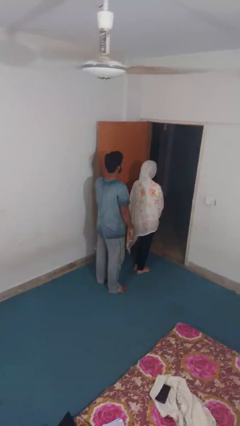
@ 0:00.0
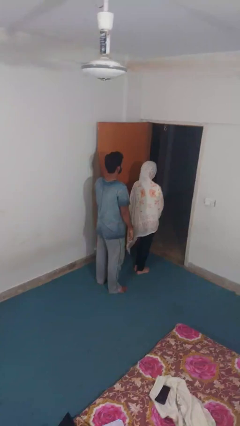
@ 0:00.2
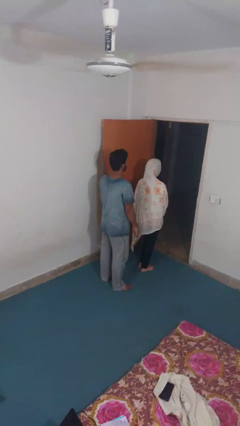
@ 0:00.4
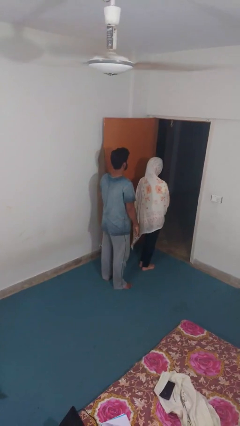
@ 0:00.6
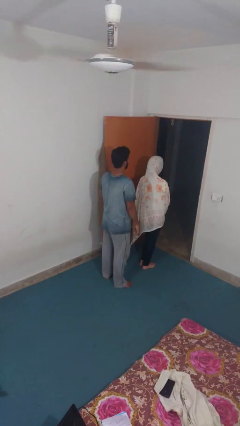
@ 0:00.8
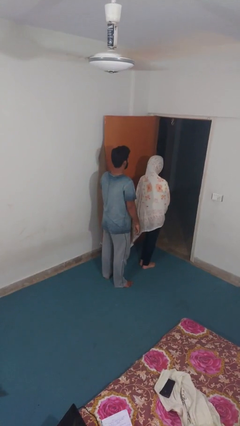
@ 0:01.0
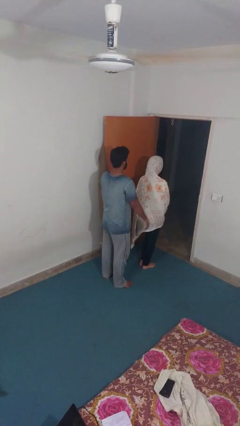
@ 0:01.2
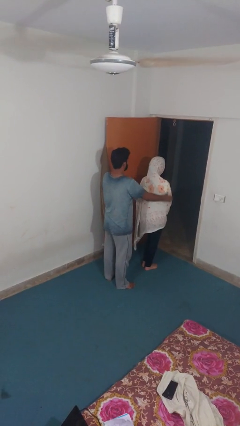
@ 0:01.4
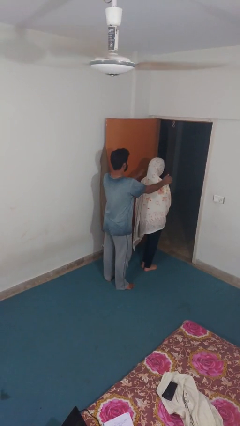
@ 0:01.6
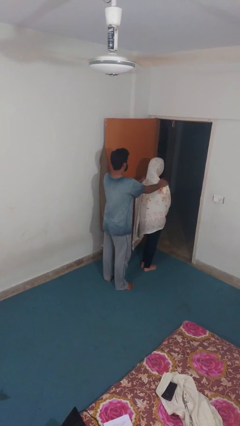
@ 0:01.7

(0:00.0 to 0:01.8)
person grabs person by shoulder

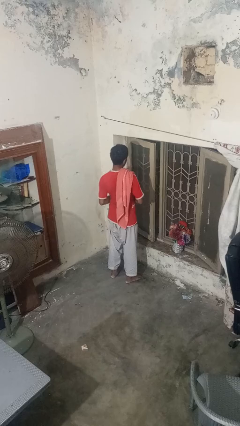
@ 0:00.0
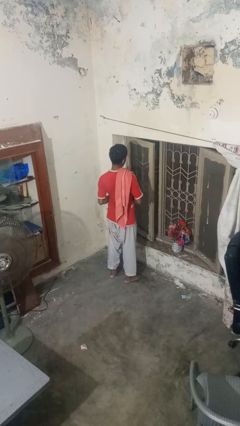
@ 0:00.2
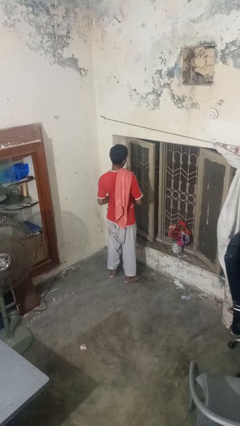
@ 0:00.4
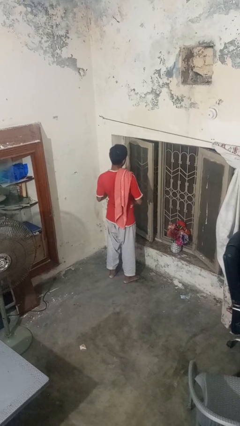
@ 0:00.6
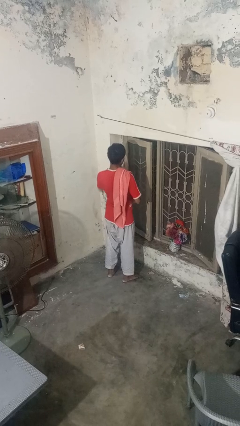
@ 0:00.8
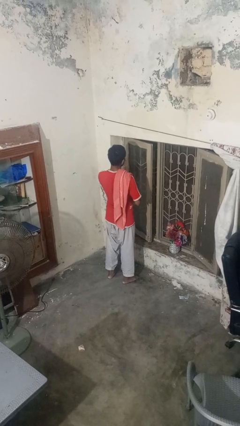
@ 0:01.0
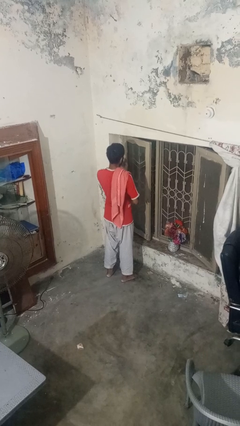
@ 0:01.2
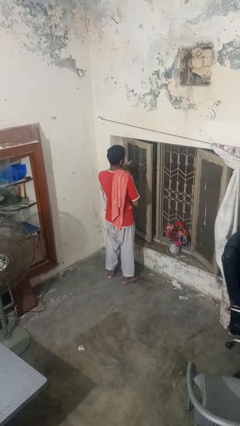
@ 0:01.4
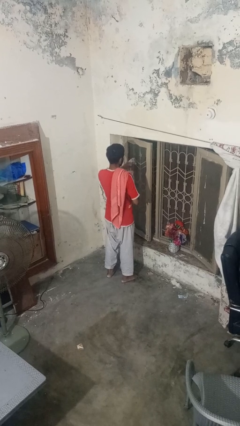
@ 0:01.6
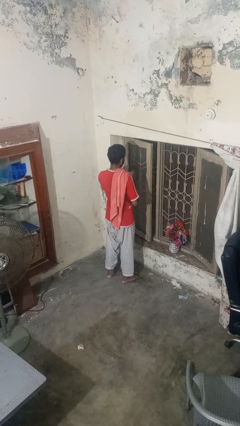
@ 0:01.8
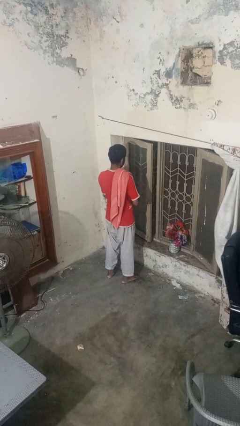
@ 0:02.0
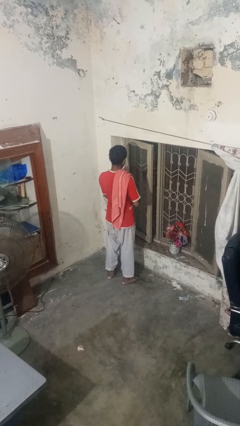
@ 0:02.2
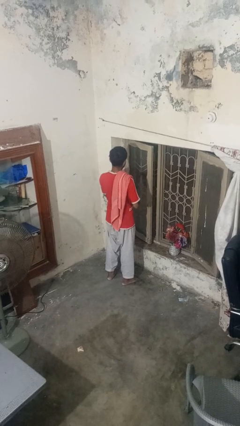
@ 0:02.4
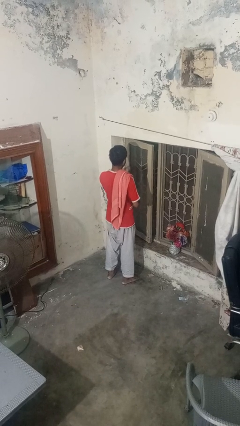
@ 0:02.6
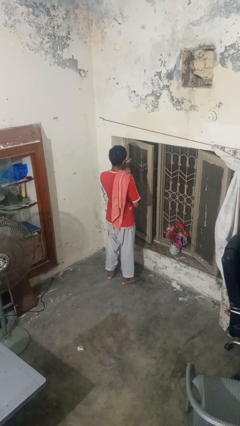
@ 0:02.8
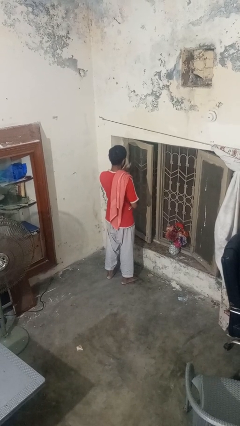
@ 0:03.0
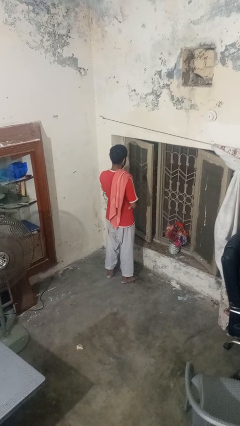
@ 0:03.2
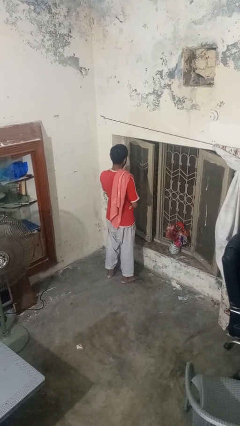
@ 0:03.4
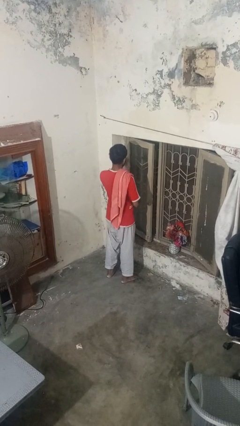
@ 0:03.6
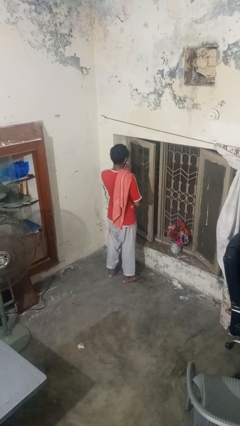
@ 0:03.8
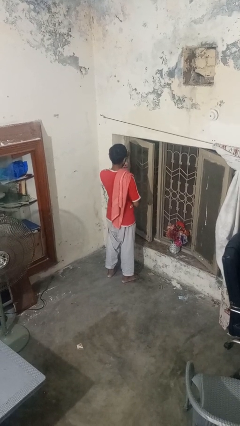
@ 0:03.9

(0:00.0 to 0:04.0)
person sprays from bottle

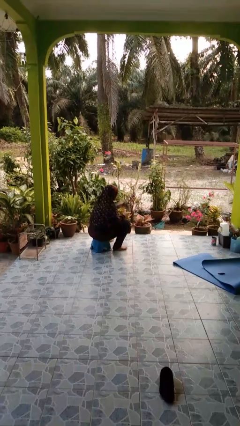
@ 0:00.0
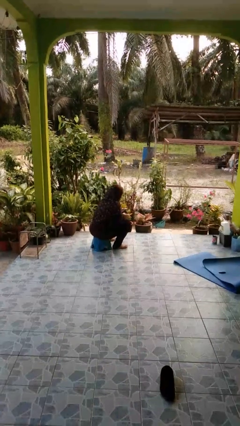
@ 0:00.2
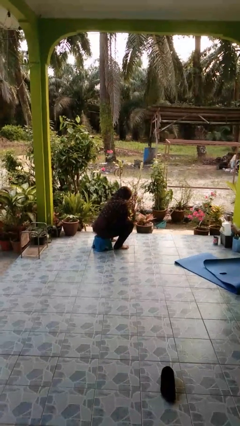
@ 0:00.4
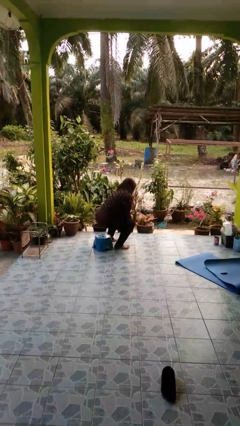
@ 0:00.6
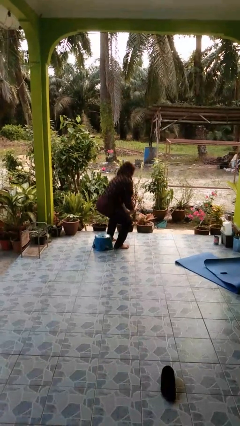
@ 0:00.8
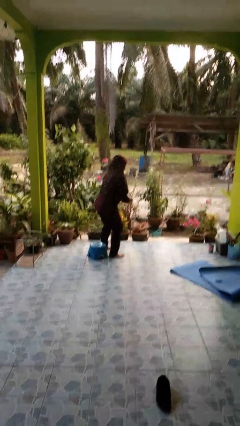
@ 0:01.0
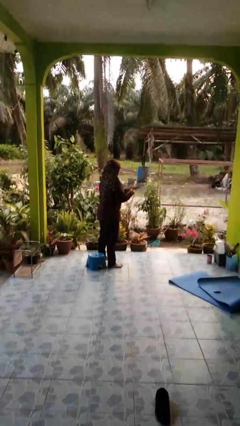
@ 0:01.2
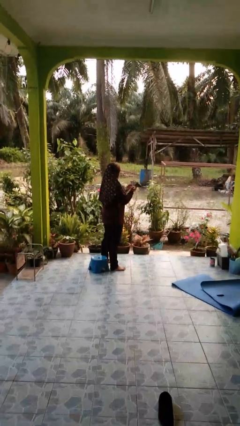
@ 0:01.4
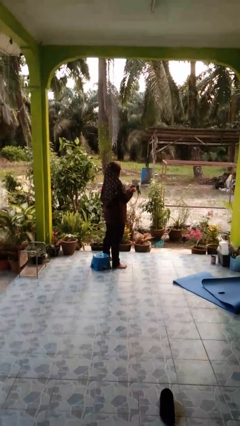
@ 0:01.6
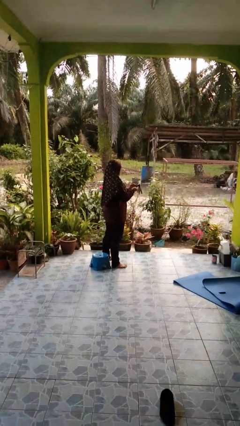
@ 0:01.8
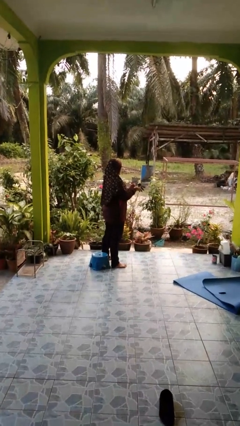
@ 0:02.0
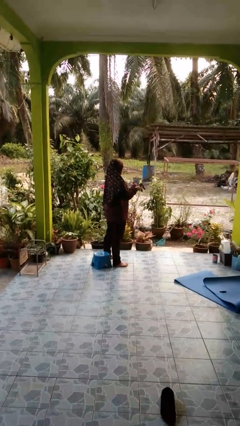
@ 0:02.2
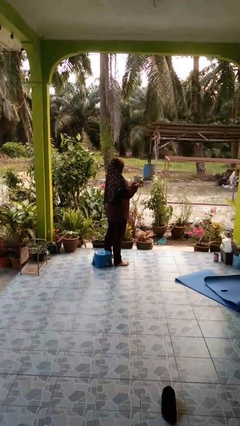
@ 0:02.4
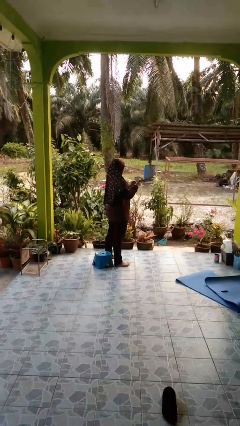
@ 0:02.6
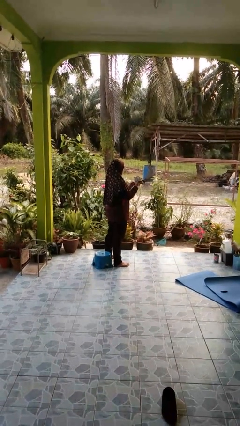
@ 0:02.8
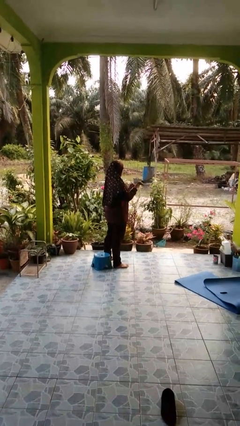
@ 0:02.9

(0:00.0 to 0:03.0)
person takes off gloves

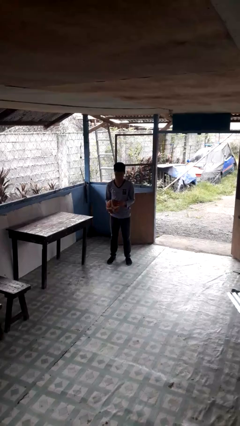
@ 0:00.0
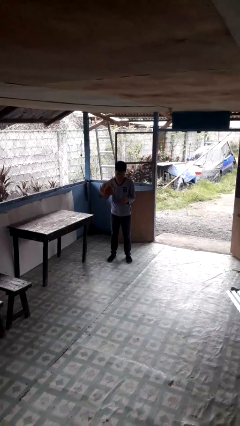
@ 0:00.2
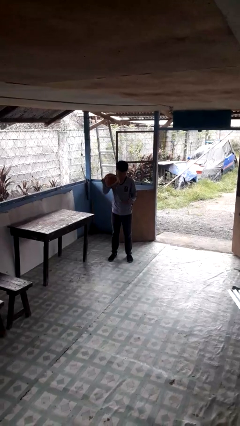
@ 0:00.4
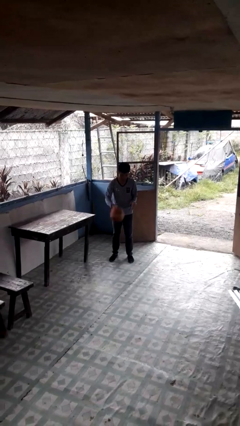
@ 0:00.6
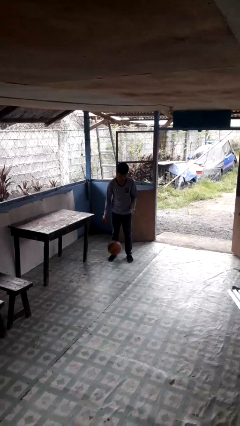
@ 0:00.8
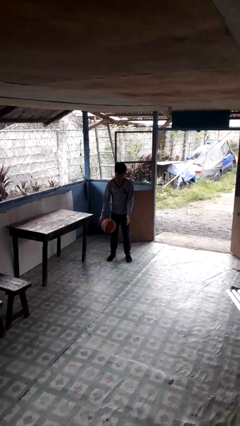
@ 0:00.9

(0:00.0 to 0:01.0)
person bounces ball on floor

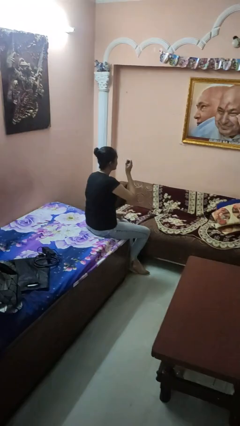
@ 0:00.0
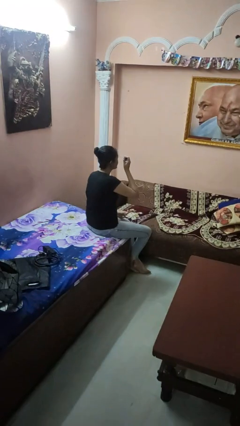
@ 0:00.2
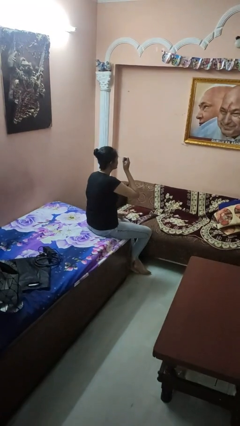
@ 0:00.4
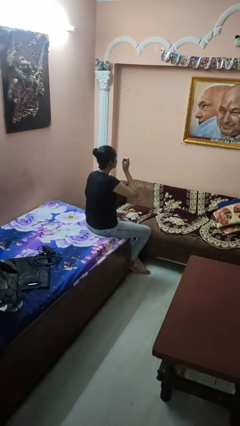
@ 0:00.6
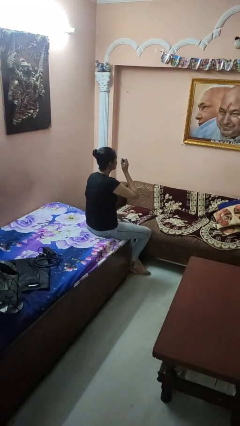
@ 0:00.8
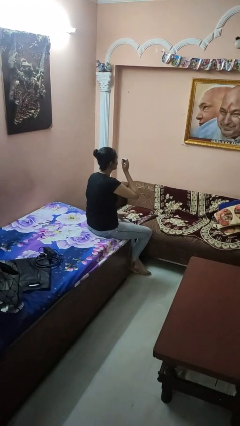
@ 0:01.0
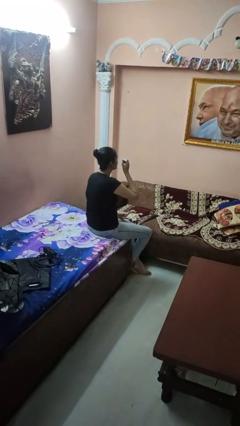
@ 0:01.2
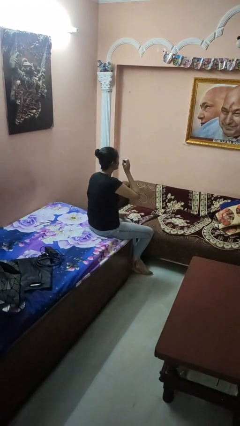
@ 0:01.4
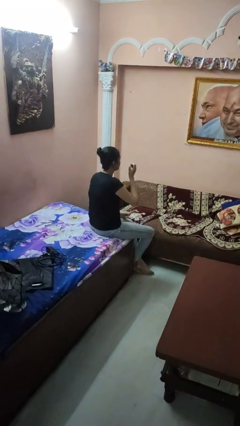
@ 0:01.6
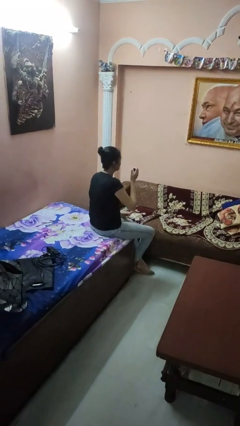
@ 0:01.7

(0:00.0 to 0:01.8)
person applies eye makeup

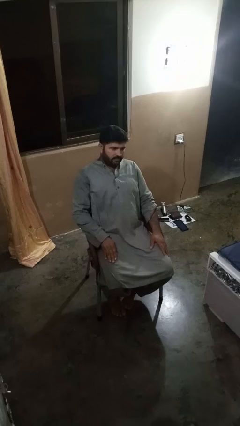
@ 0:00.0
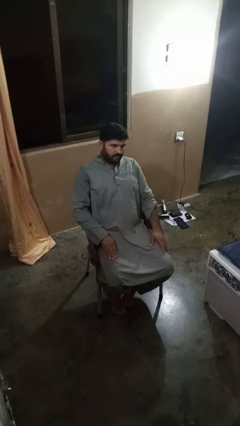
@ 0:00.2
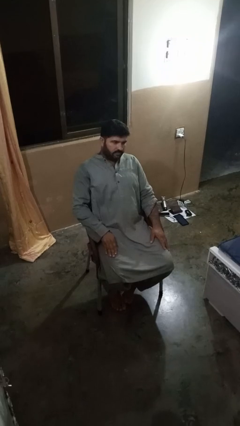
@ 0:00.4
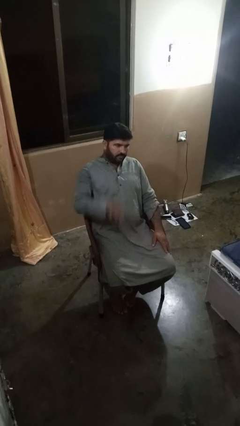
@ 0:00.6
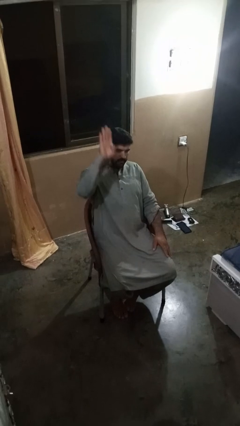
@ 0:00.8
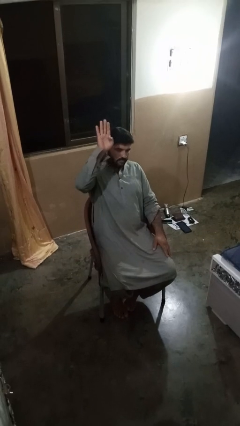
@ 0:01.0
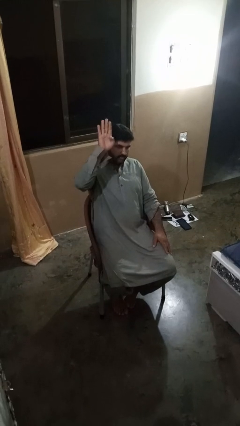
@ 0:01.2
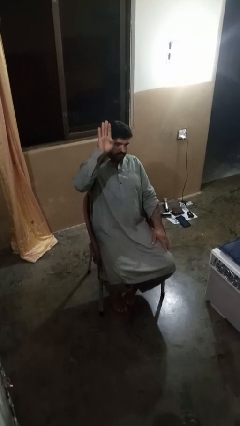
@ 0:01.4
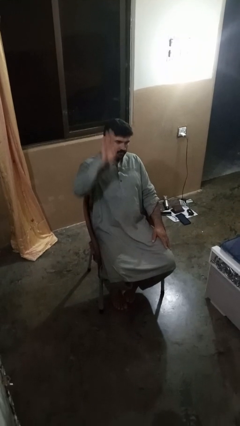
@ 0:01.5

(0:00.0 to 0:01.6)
person gestures number four

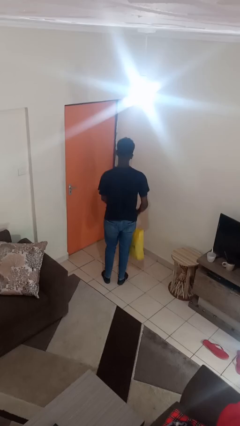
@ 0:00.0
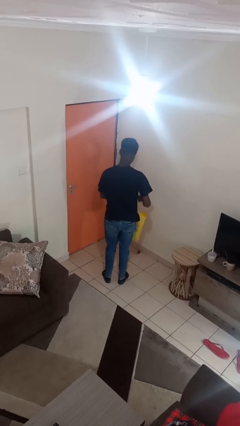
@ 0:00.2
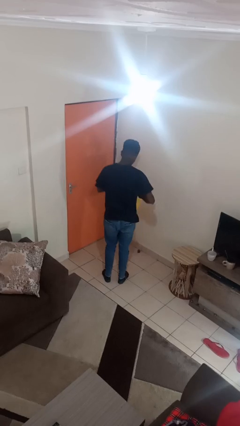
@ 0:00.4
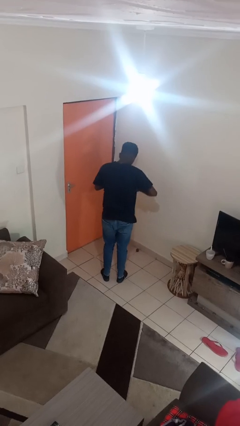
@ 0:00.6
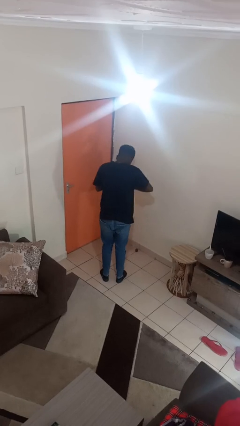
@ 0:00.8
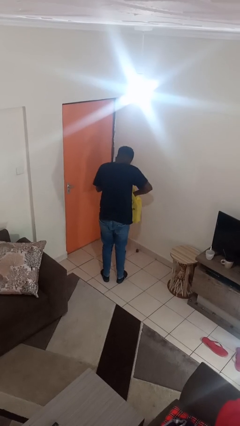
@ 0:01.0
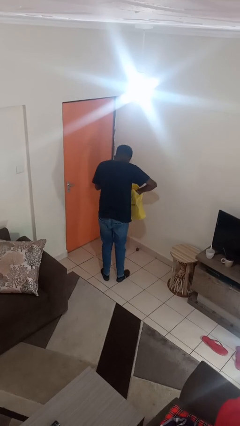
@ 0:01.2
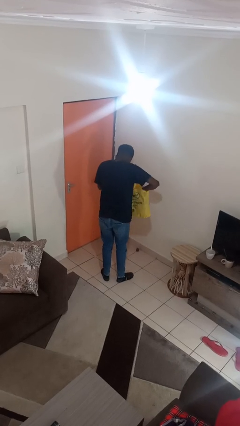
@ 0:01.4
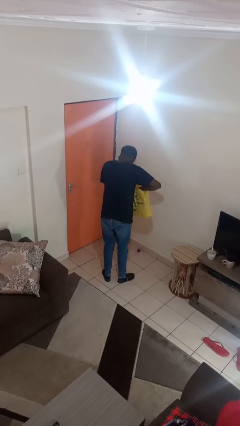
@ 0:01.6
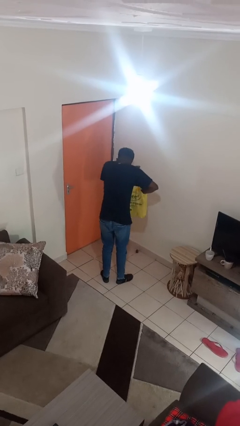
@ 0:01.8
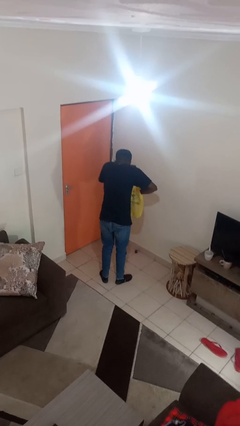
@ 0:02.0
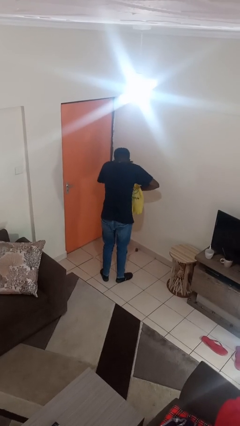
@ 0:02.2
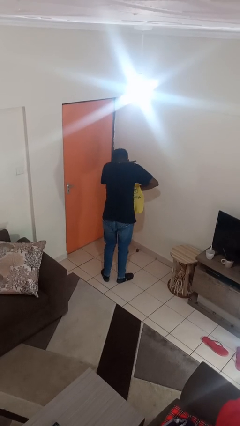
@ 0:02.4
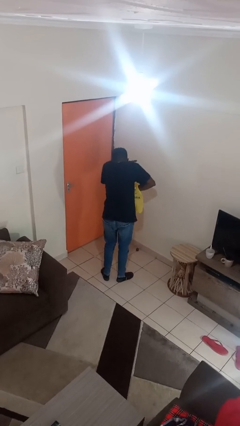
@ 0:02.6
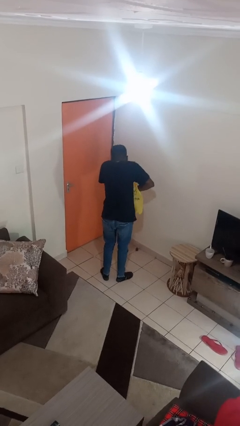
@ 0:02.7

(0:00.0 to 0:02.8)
person searches in bag

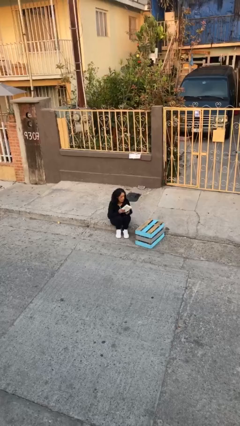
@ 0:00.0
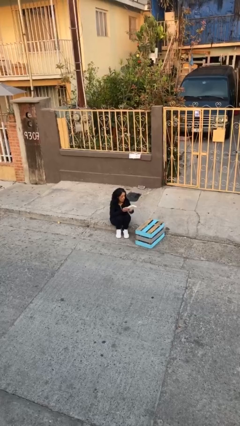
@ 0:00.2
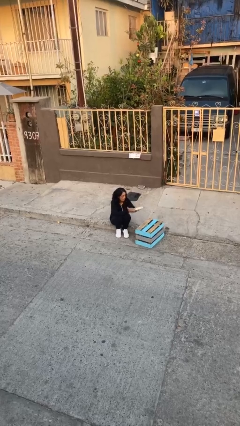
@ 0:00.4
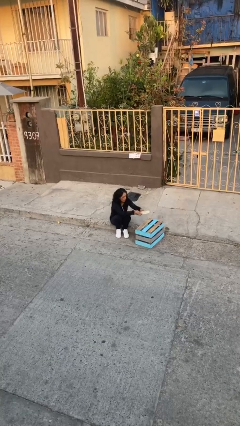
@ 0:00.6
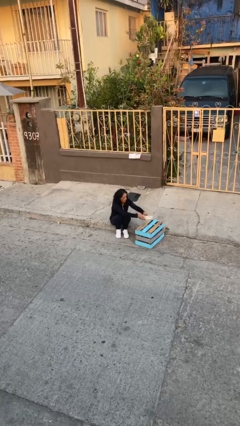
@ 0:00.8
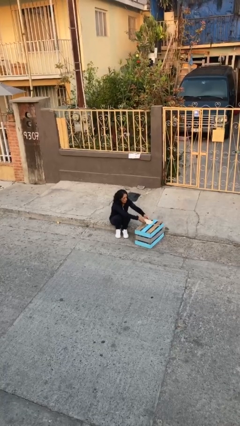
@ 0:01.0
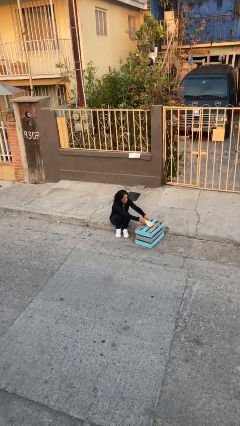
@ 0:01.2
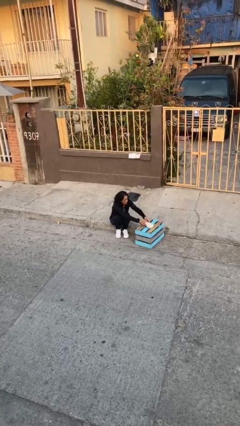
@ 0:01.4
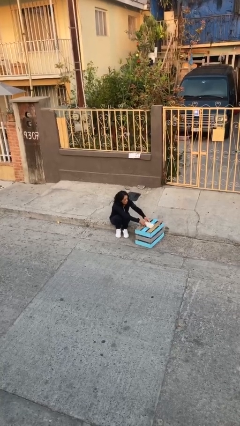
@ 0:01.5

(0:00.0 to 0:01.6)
person puts down object on table
